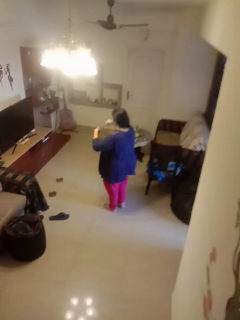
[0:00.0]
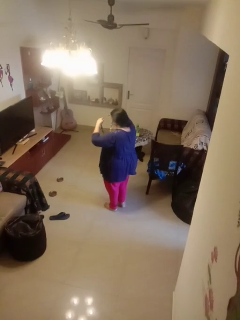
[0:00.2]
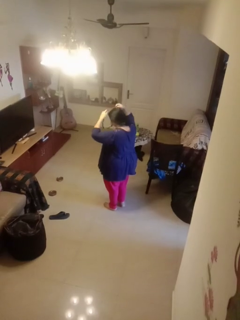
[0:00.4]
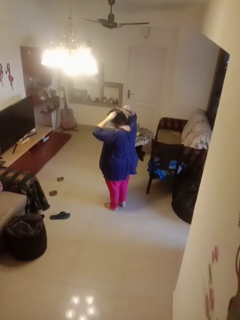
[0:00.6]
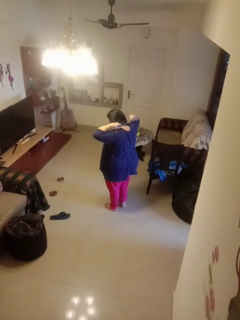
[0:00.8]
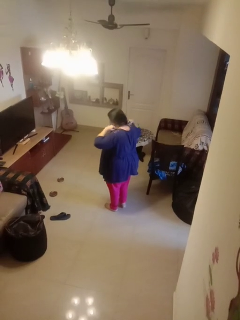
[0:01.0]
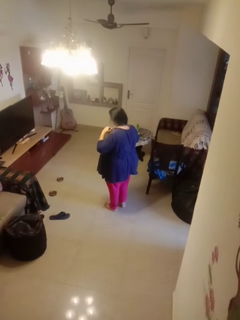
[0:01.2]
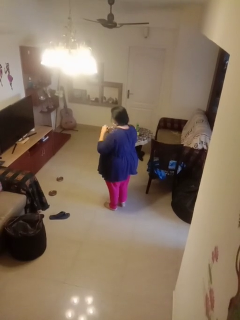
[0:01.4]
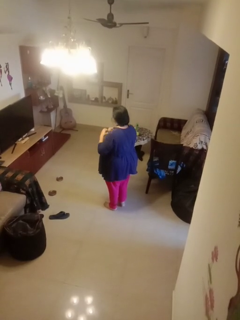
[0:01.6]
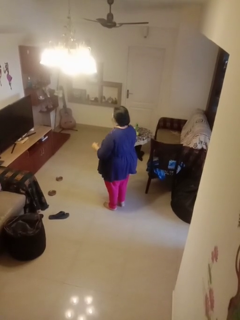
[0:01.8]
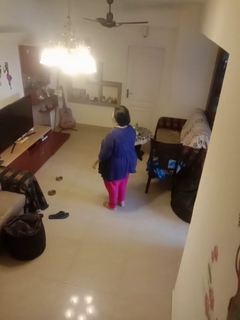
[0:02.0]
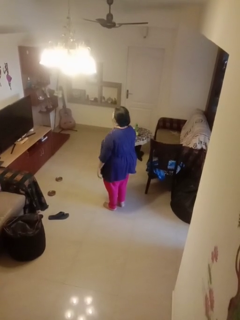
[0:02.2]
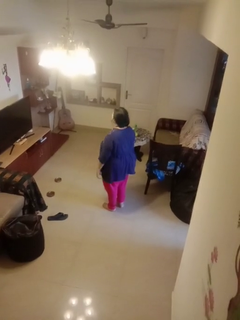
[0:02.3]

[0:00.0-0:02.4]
person puts on necklace

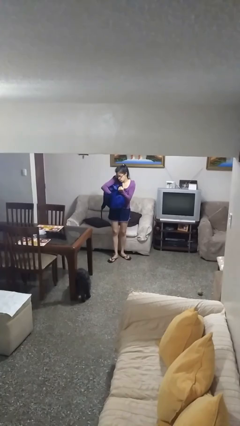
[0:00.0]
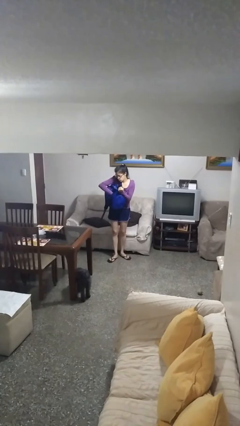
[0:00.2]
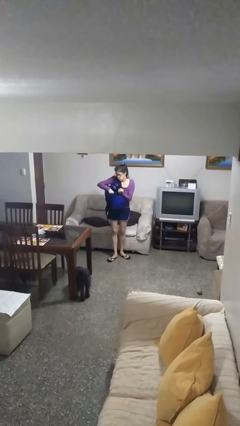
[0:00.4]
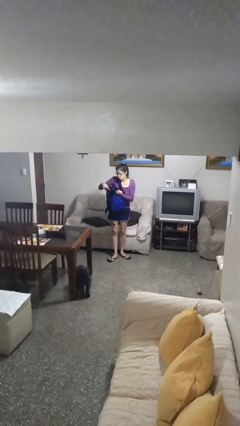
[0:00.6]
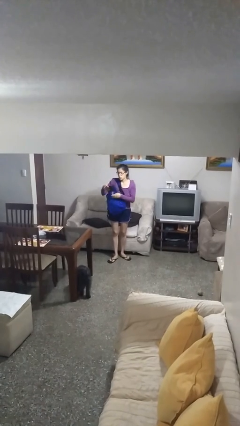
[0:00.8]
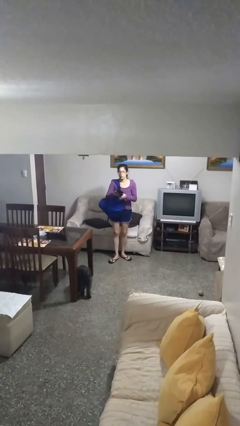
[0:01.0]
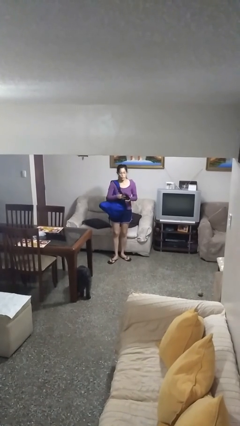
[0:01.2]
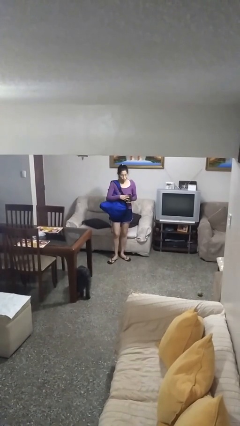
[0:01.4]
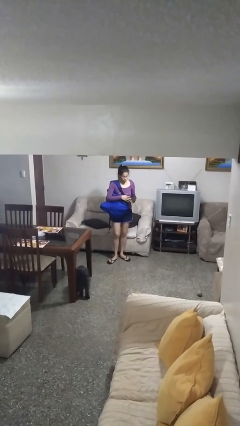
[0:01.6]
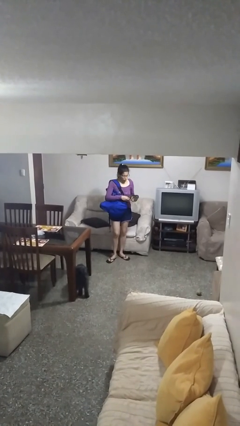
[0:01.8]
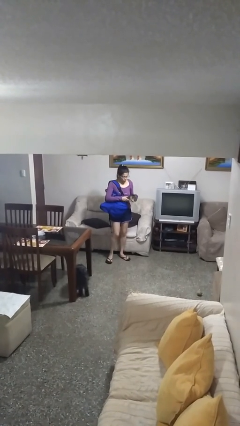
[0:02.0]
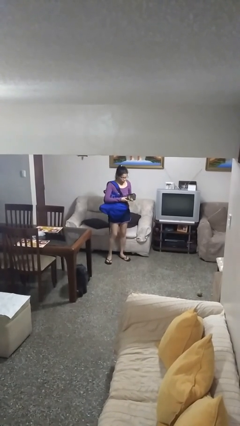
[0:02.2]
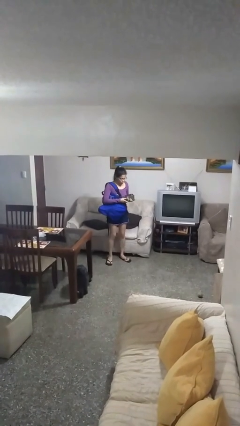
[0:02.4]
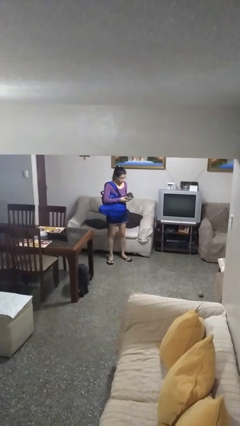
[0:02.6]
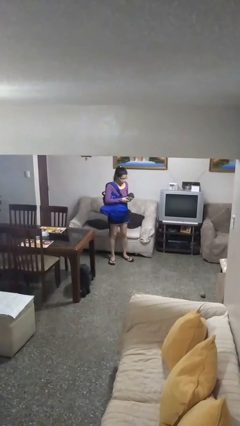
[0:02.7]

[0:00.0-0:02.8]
person takes object from backpack

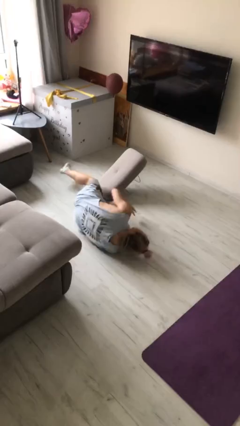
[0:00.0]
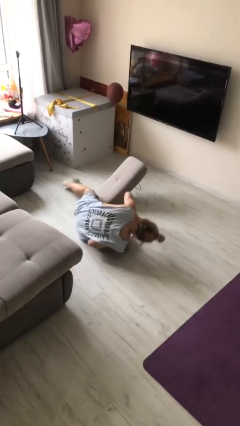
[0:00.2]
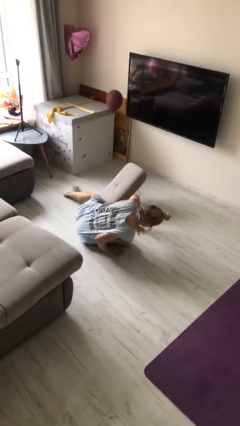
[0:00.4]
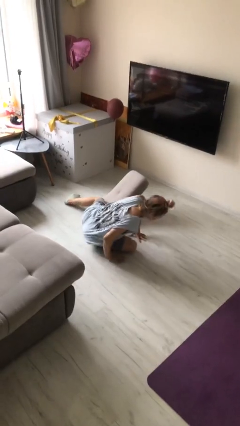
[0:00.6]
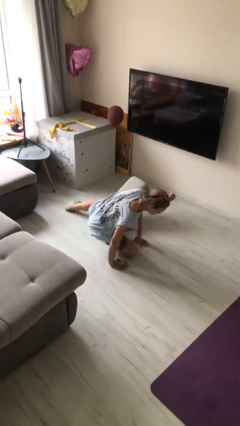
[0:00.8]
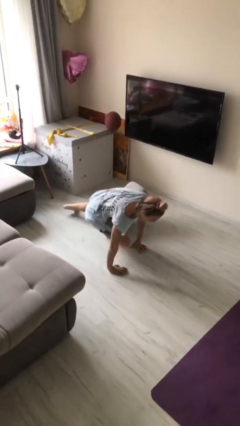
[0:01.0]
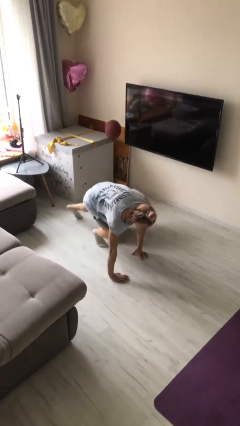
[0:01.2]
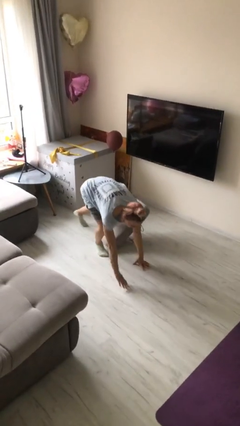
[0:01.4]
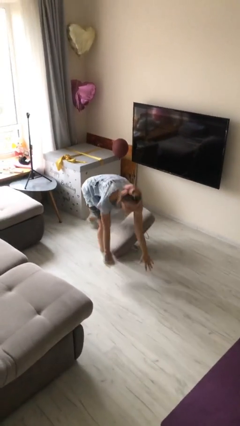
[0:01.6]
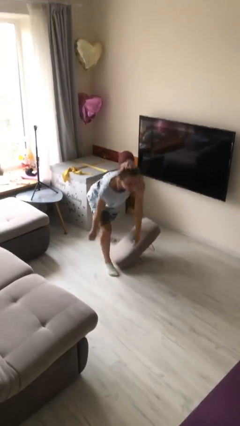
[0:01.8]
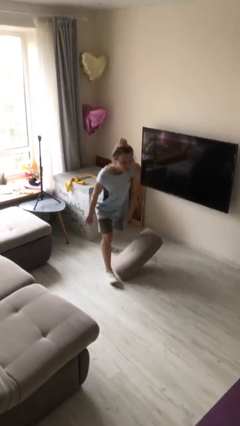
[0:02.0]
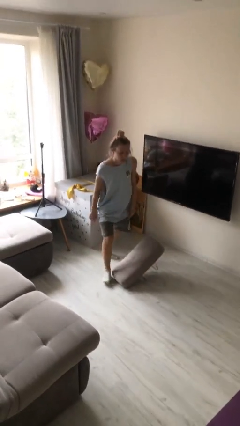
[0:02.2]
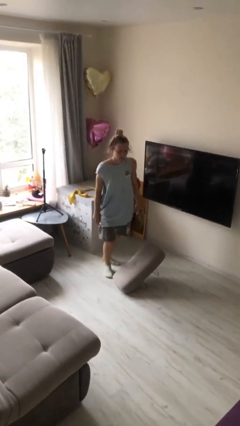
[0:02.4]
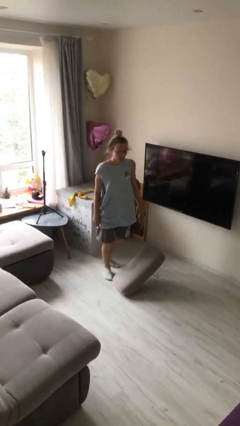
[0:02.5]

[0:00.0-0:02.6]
person stands up from floor

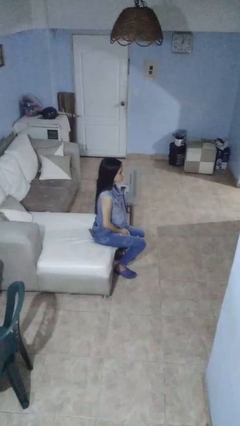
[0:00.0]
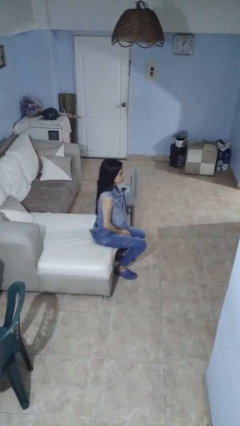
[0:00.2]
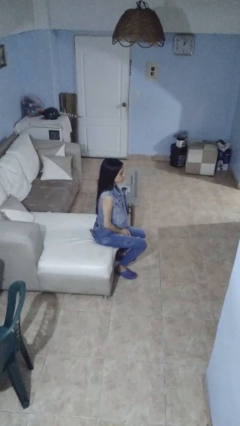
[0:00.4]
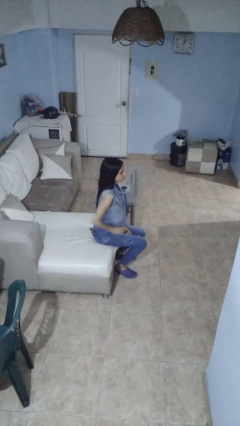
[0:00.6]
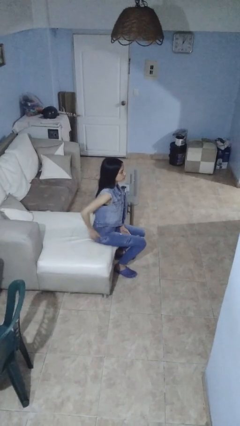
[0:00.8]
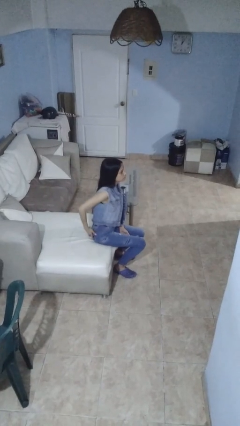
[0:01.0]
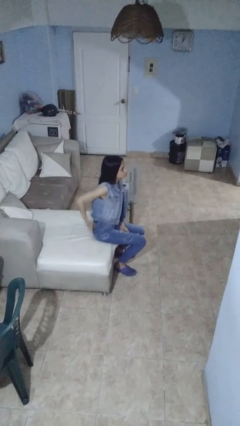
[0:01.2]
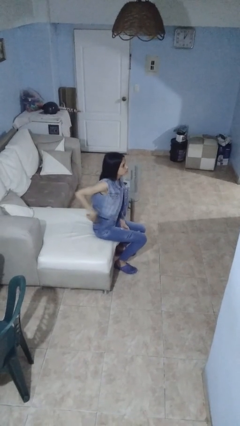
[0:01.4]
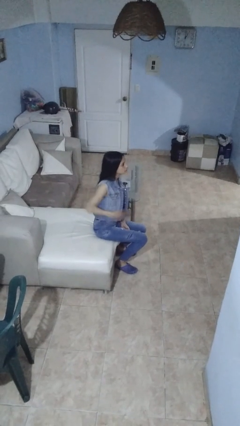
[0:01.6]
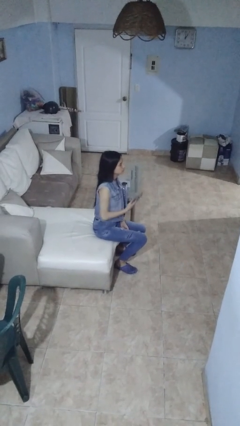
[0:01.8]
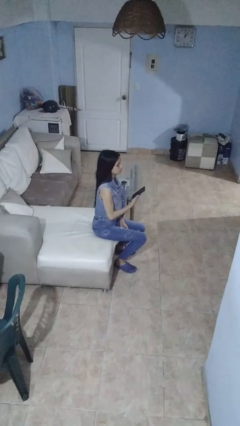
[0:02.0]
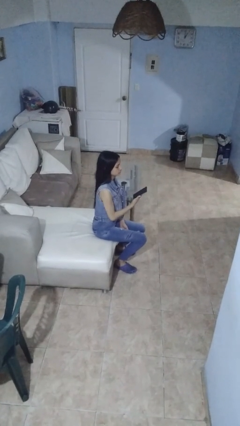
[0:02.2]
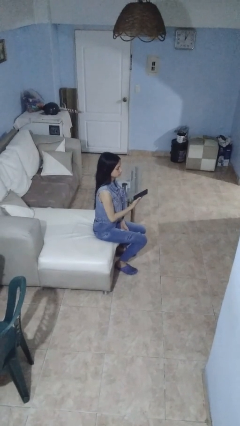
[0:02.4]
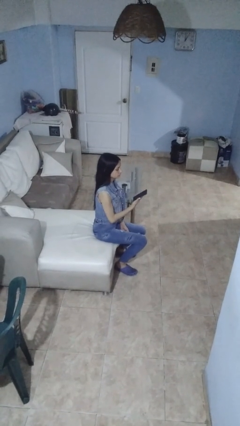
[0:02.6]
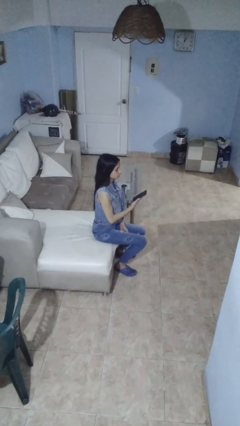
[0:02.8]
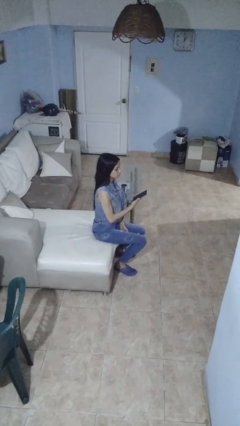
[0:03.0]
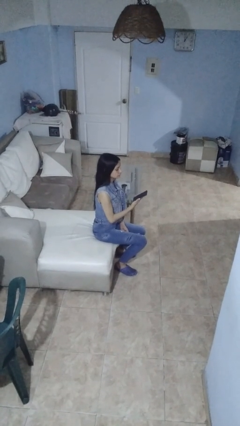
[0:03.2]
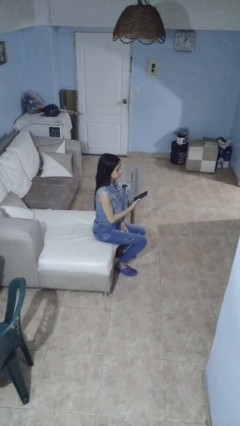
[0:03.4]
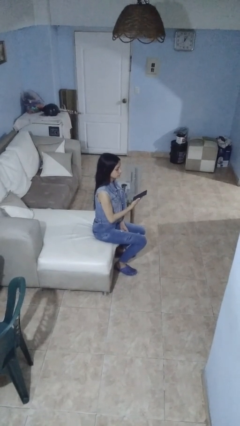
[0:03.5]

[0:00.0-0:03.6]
person takes phone from pocket

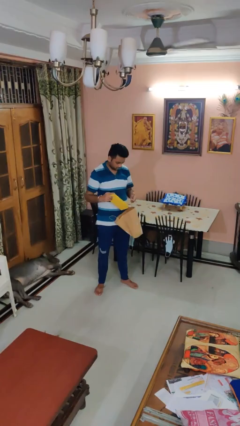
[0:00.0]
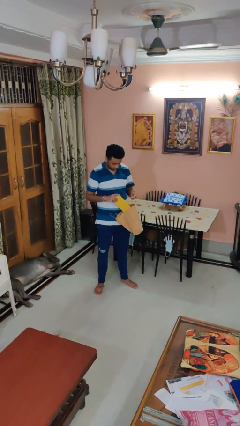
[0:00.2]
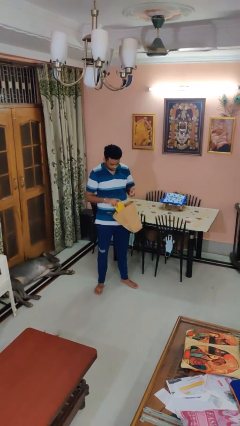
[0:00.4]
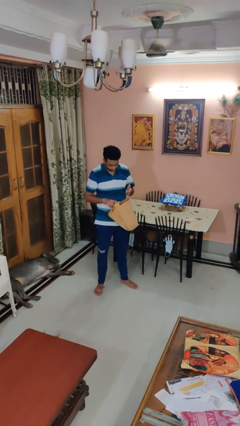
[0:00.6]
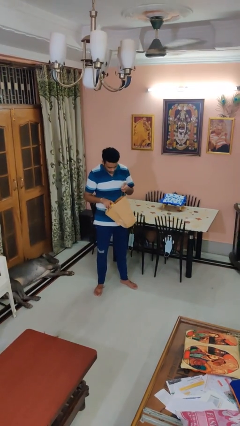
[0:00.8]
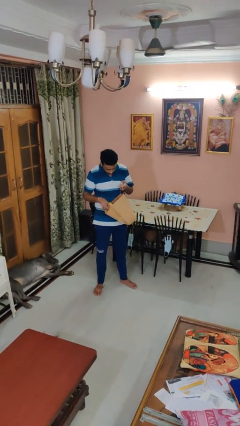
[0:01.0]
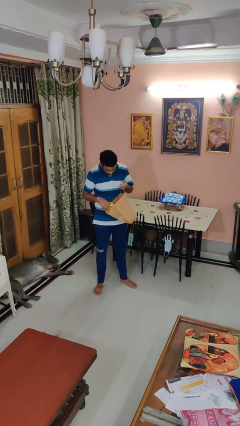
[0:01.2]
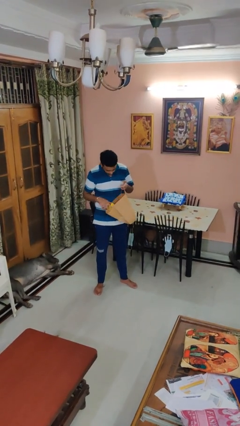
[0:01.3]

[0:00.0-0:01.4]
person puts object into bag

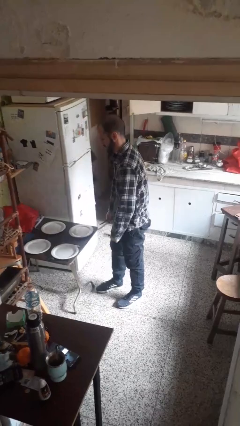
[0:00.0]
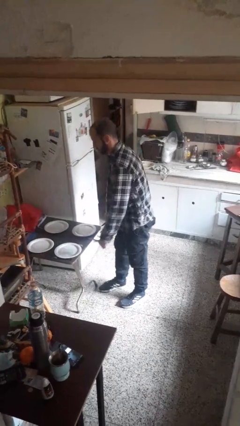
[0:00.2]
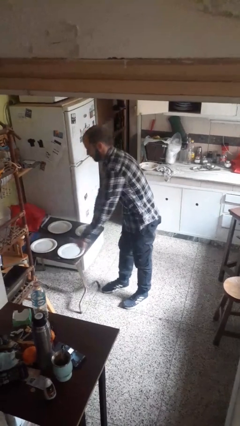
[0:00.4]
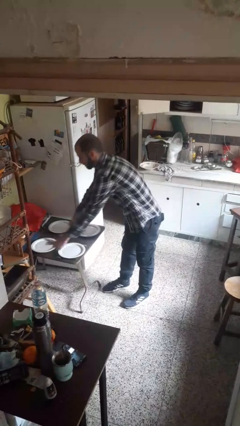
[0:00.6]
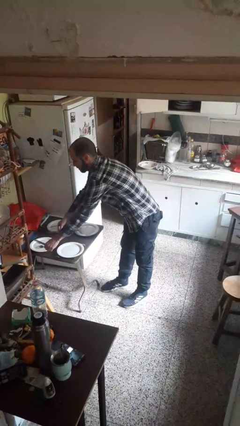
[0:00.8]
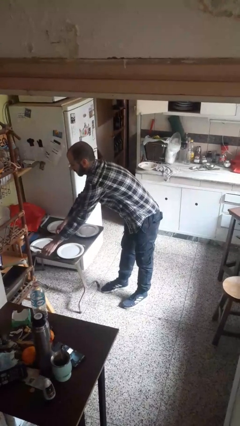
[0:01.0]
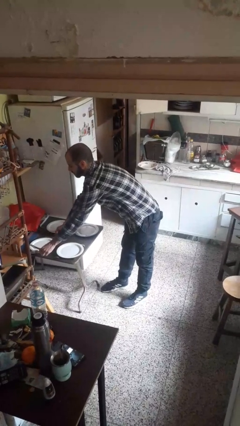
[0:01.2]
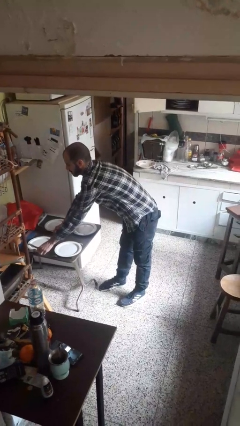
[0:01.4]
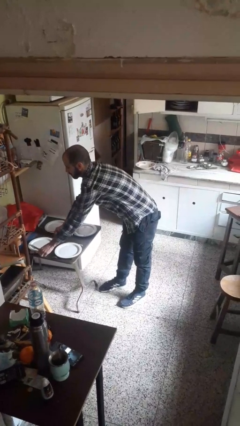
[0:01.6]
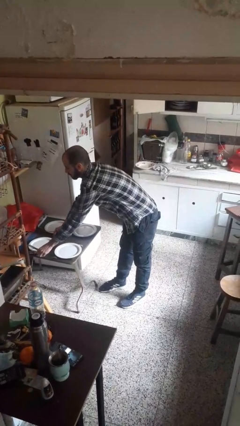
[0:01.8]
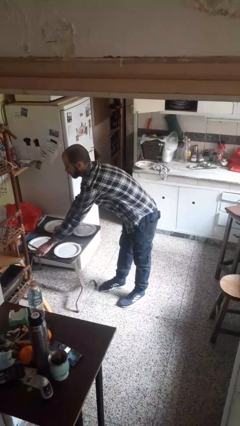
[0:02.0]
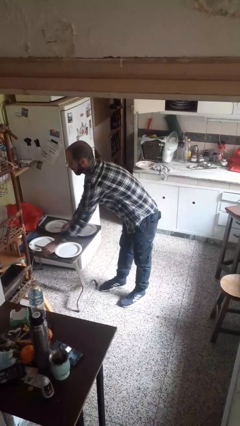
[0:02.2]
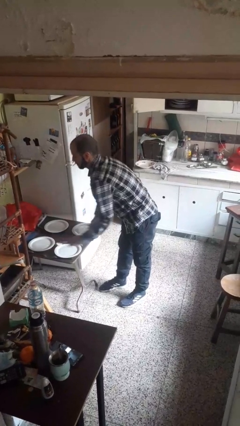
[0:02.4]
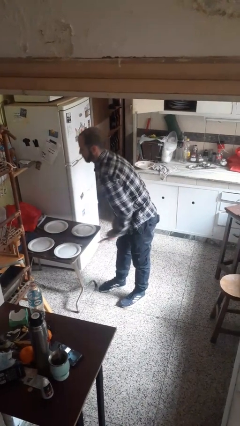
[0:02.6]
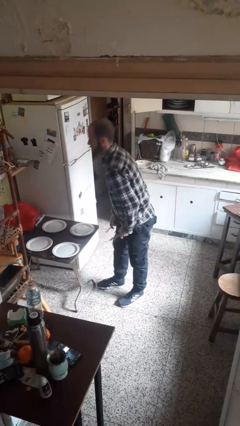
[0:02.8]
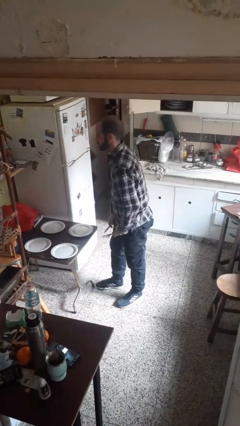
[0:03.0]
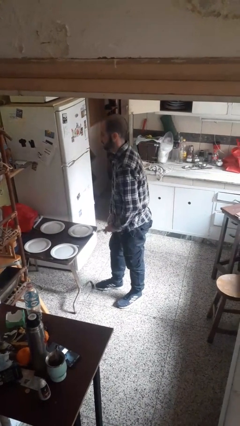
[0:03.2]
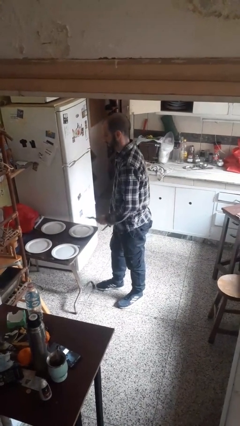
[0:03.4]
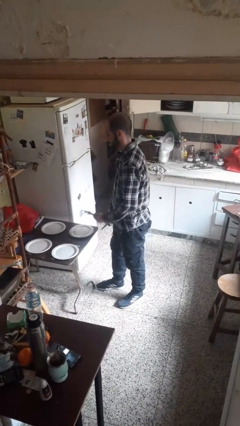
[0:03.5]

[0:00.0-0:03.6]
person sets table

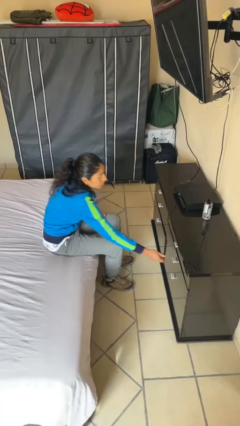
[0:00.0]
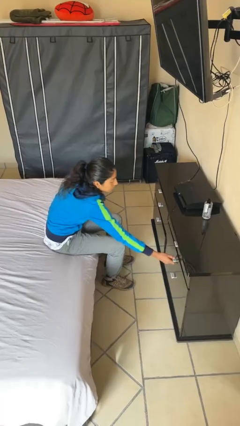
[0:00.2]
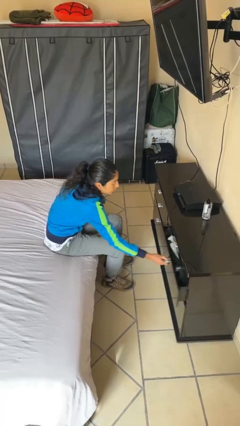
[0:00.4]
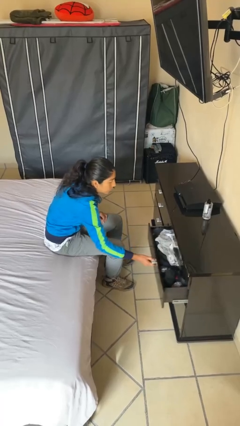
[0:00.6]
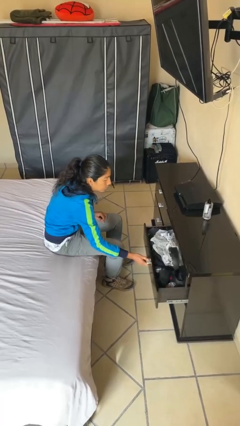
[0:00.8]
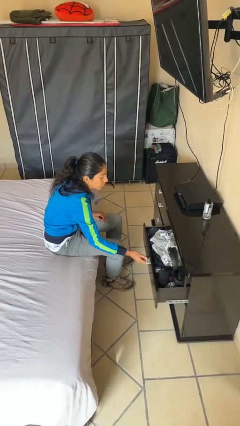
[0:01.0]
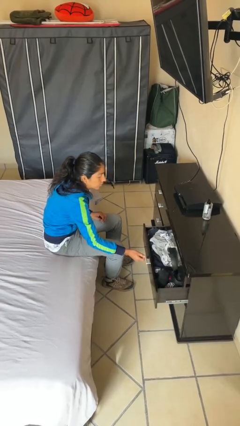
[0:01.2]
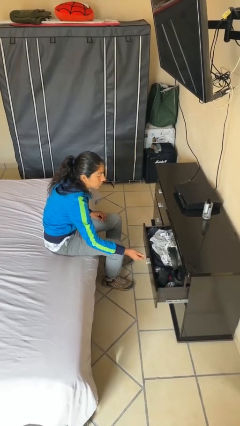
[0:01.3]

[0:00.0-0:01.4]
person opens dresser drawer
